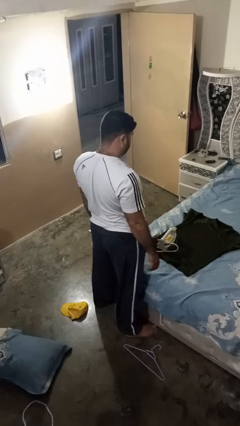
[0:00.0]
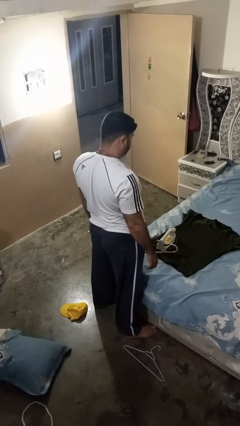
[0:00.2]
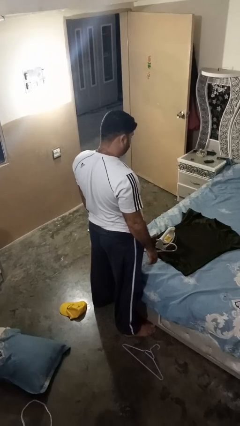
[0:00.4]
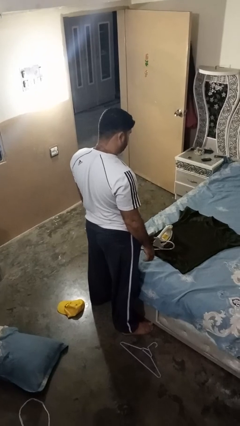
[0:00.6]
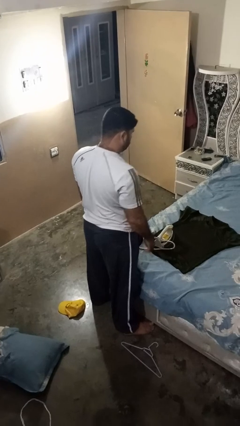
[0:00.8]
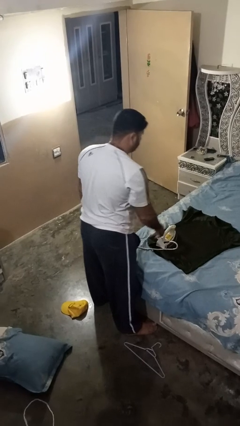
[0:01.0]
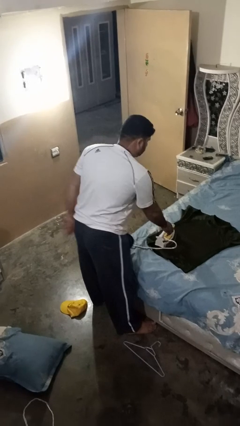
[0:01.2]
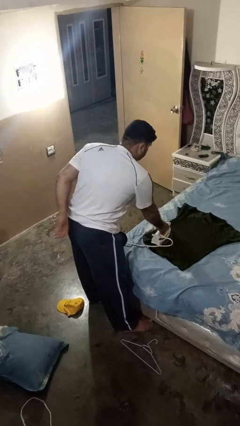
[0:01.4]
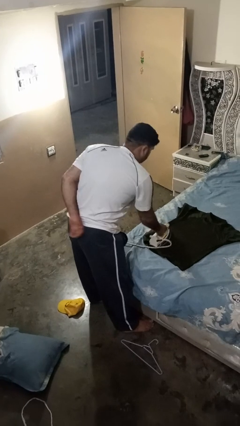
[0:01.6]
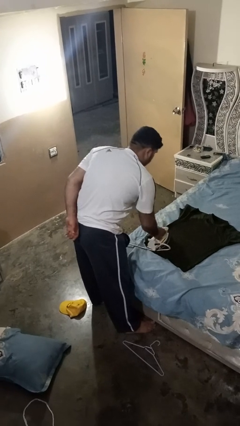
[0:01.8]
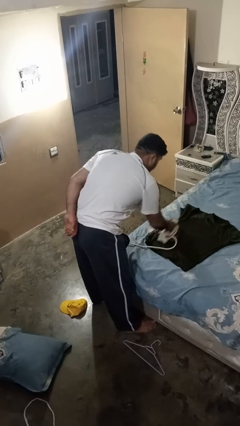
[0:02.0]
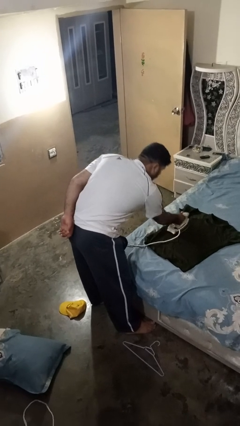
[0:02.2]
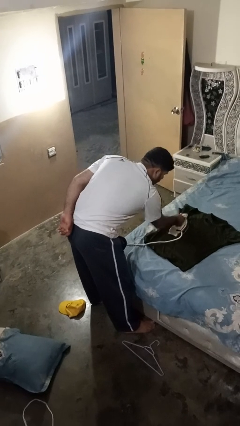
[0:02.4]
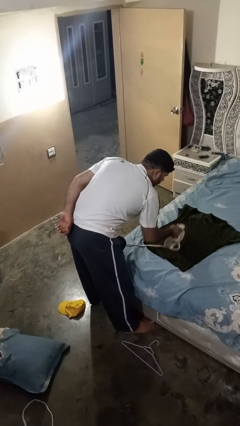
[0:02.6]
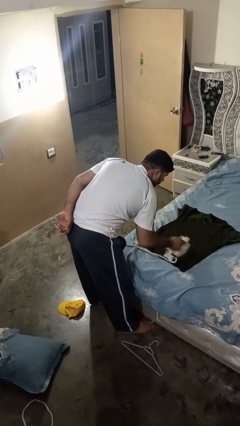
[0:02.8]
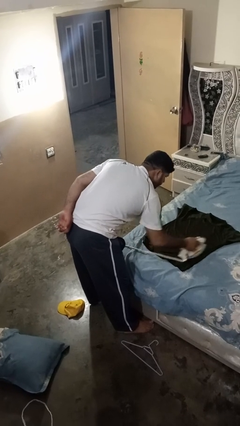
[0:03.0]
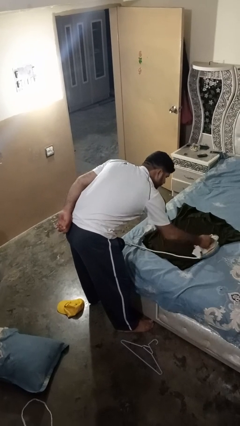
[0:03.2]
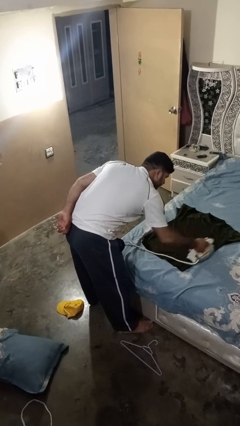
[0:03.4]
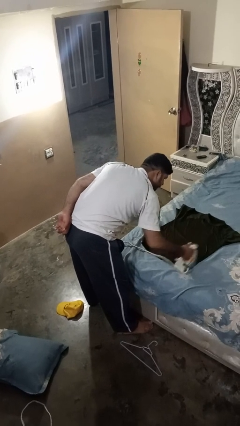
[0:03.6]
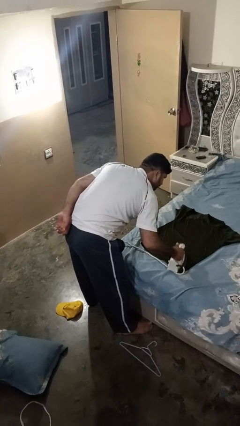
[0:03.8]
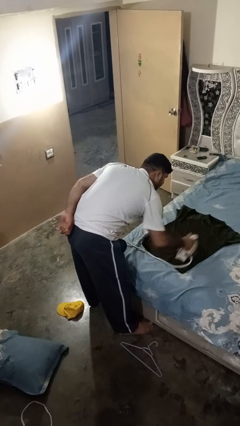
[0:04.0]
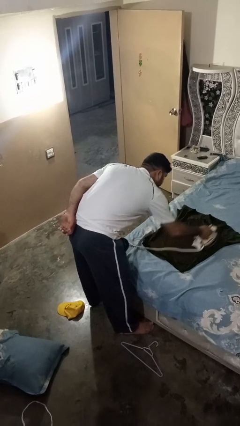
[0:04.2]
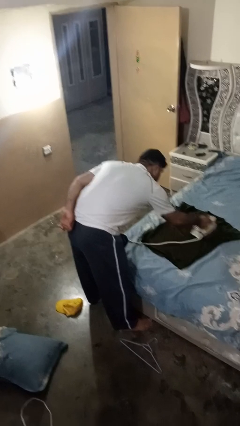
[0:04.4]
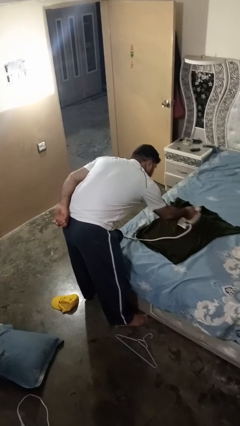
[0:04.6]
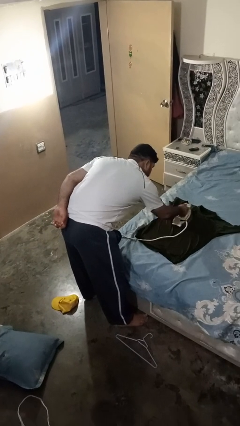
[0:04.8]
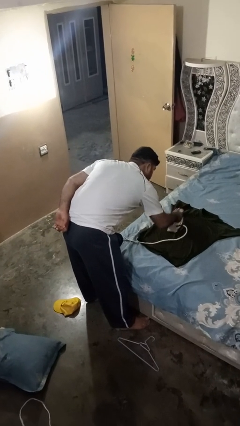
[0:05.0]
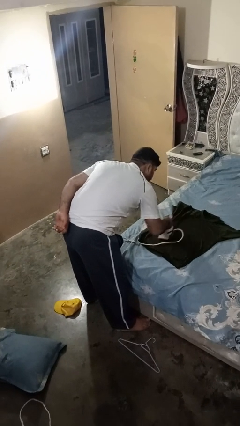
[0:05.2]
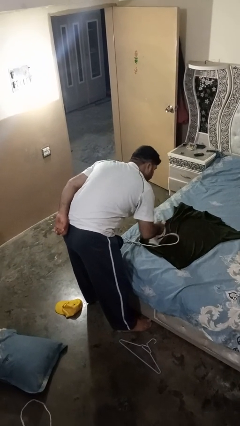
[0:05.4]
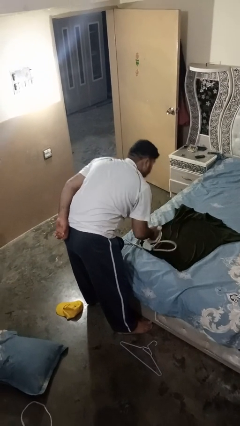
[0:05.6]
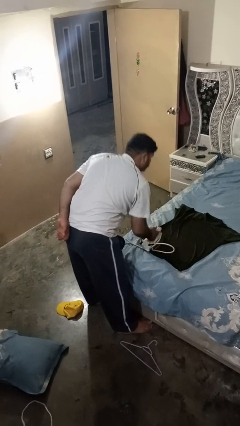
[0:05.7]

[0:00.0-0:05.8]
person irons clothes

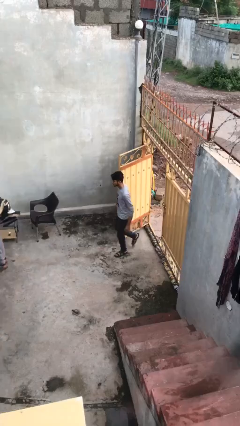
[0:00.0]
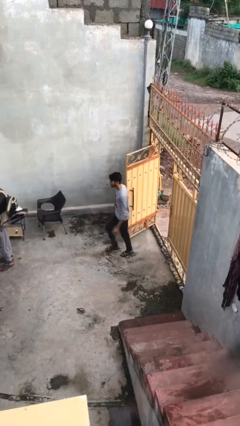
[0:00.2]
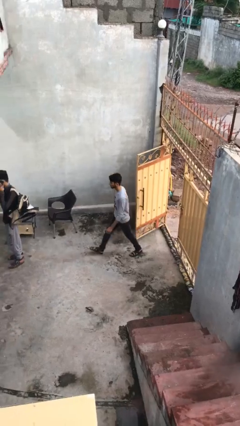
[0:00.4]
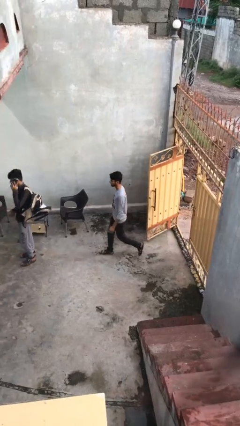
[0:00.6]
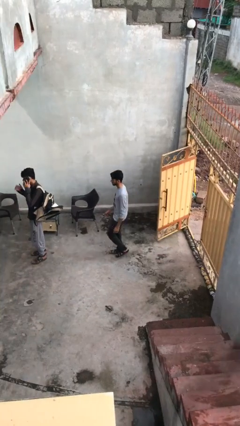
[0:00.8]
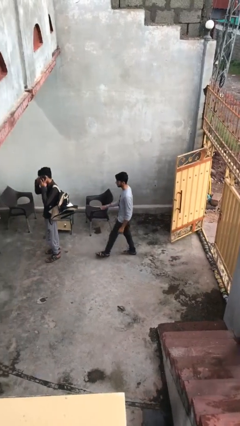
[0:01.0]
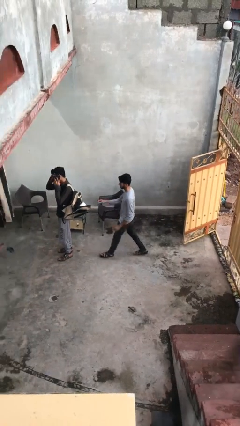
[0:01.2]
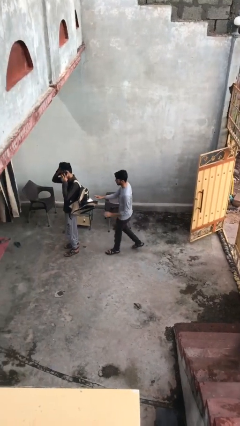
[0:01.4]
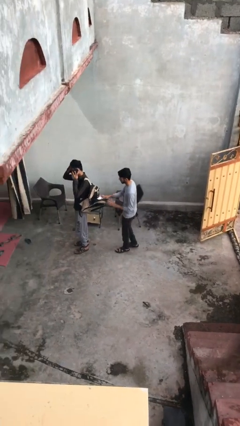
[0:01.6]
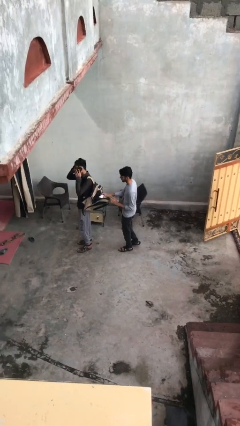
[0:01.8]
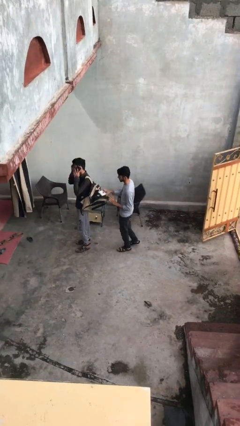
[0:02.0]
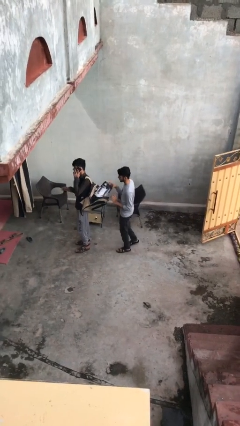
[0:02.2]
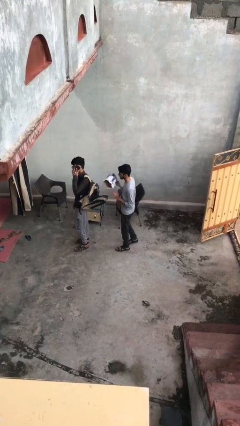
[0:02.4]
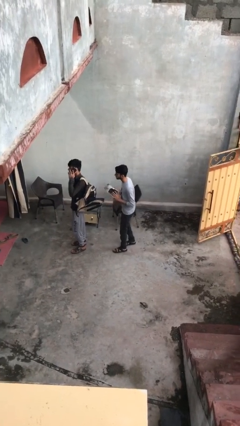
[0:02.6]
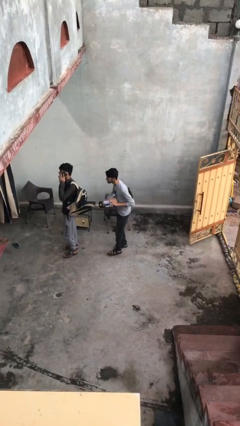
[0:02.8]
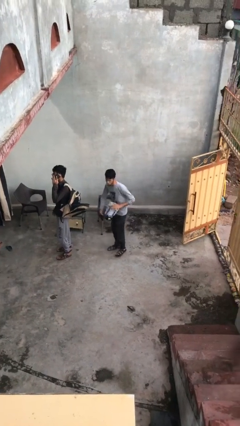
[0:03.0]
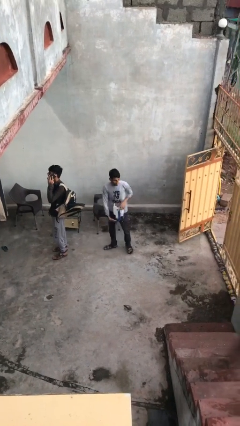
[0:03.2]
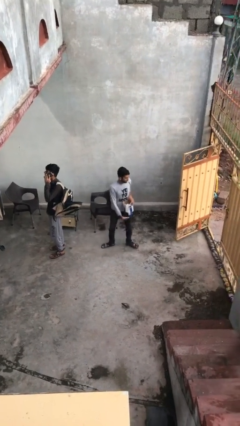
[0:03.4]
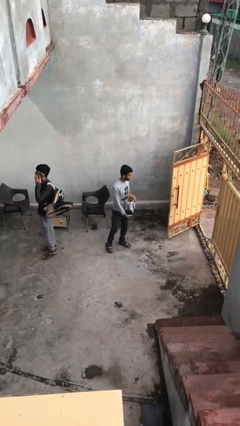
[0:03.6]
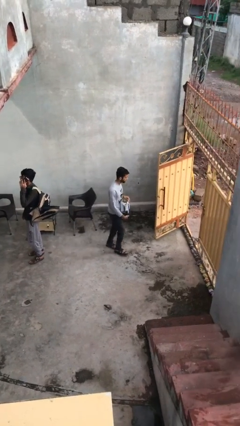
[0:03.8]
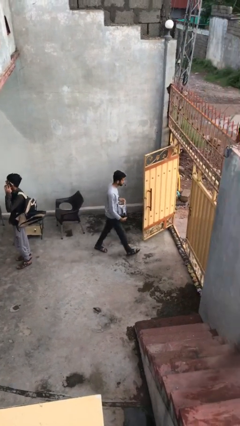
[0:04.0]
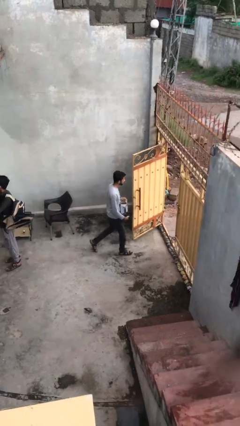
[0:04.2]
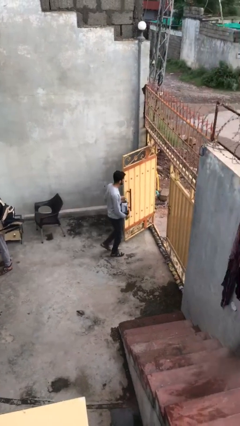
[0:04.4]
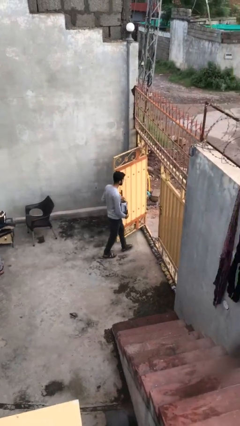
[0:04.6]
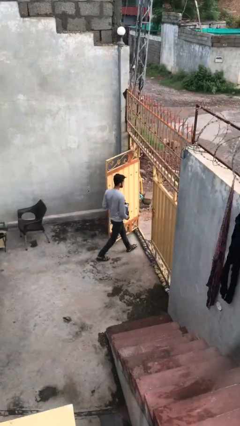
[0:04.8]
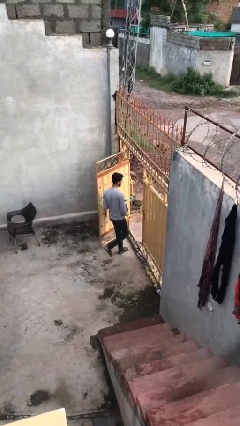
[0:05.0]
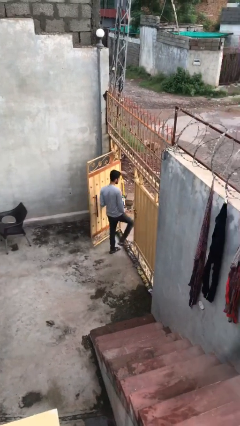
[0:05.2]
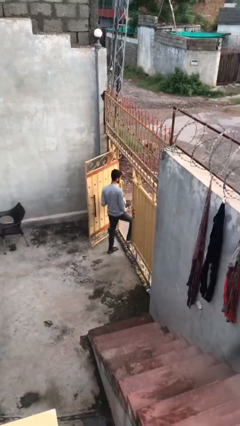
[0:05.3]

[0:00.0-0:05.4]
person steals object from person

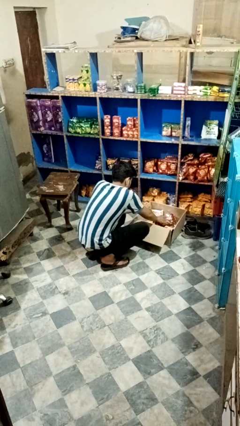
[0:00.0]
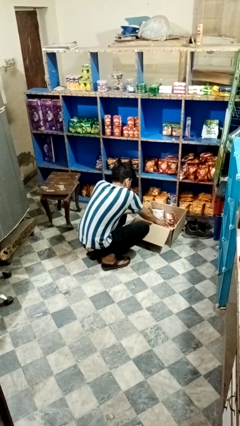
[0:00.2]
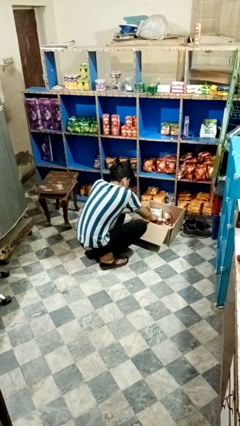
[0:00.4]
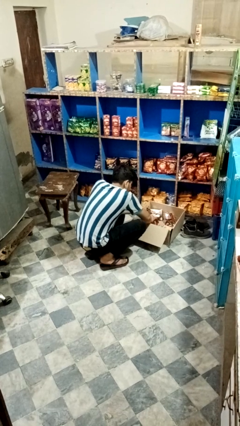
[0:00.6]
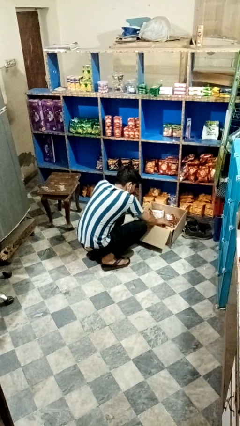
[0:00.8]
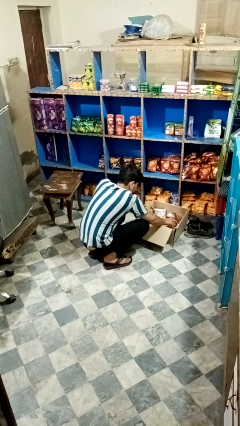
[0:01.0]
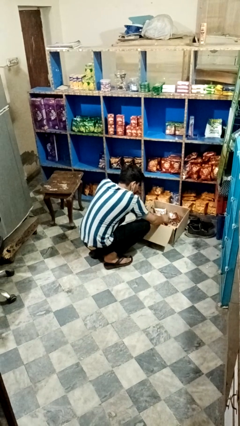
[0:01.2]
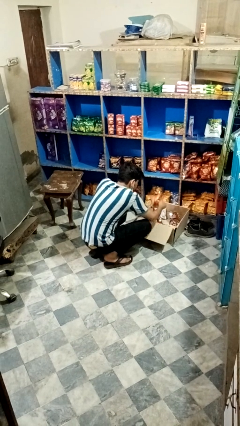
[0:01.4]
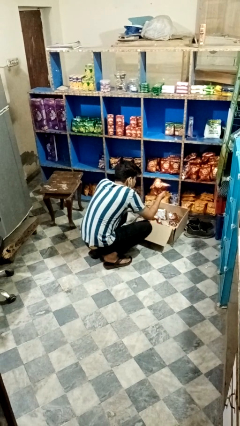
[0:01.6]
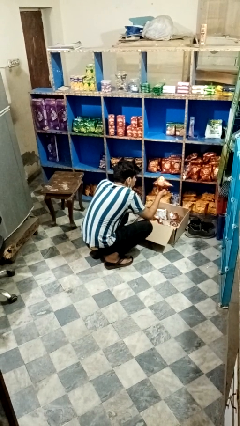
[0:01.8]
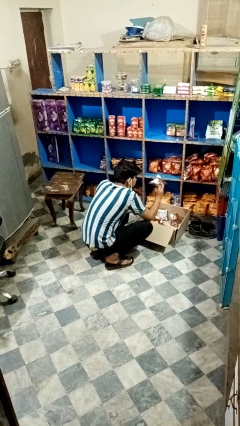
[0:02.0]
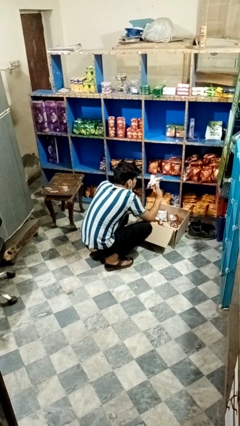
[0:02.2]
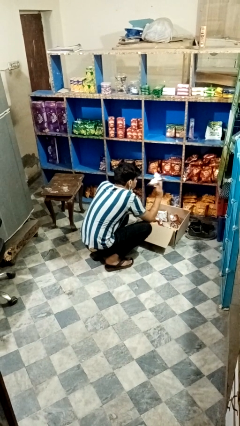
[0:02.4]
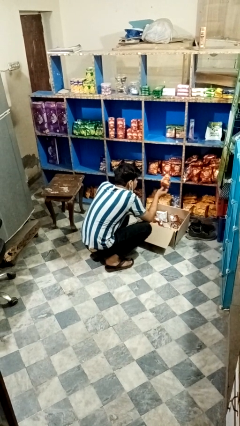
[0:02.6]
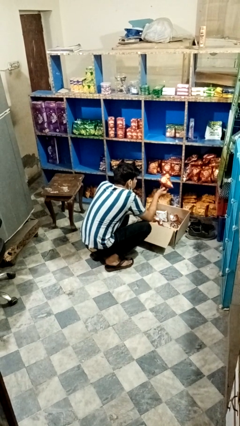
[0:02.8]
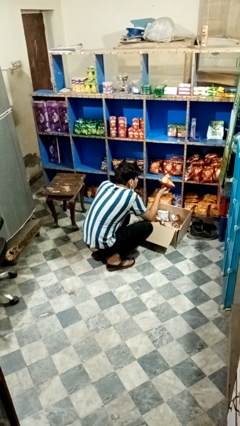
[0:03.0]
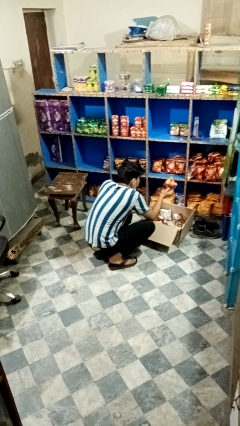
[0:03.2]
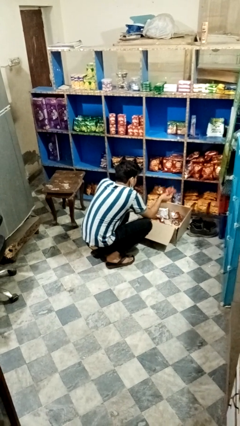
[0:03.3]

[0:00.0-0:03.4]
person searches in box

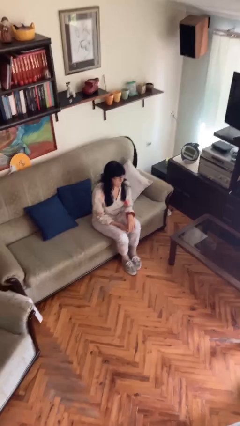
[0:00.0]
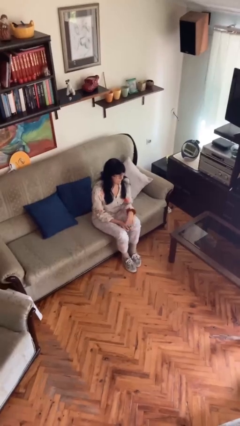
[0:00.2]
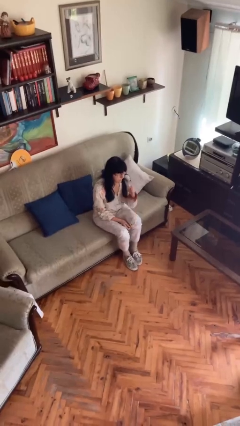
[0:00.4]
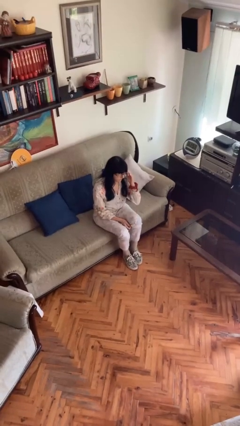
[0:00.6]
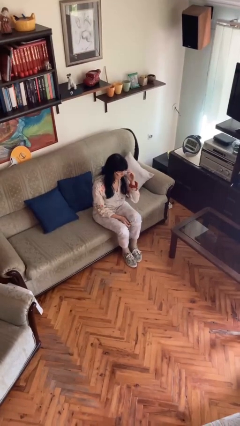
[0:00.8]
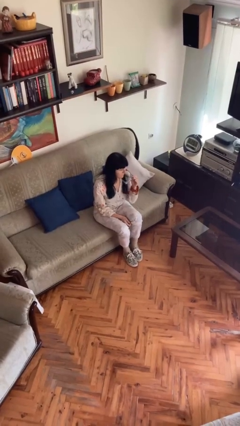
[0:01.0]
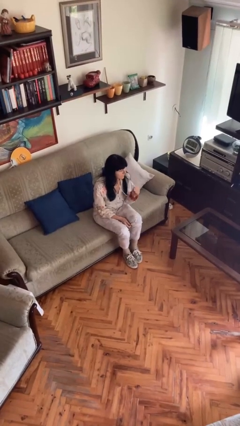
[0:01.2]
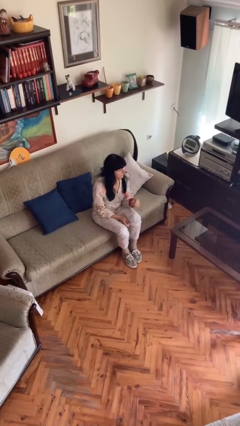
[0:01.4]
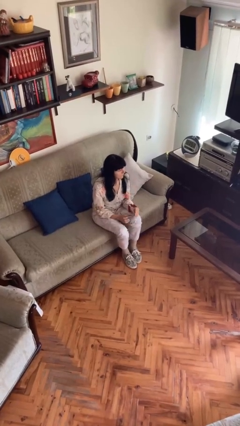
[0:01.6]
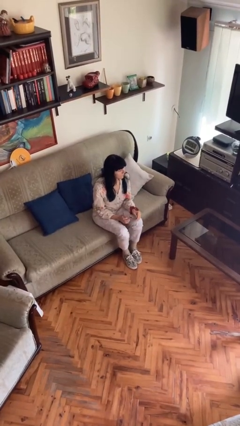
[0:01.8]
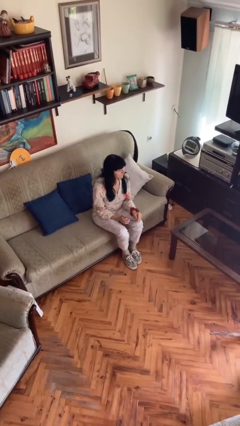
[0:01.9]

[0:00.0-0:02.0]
person takes off glasses

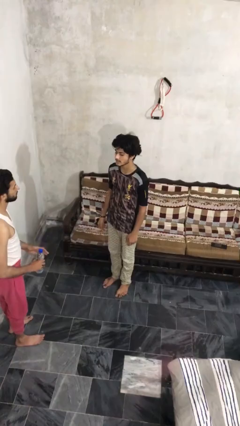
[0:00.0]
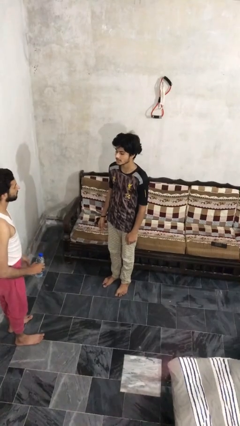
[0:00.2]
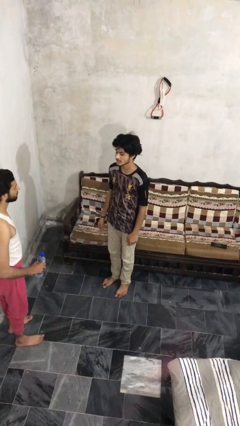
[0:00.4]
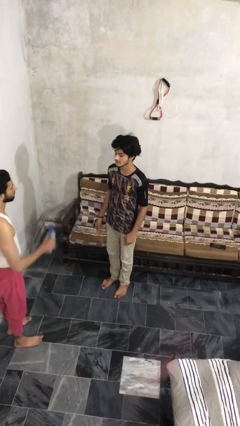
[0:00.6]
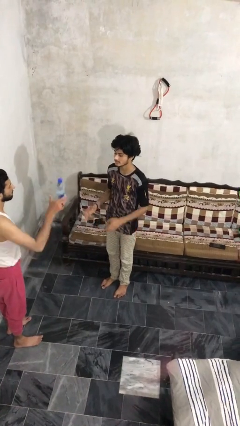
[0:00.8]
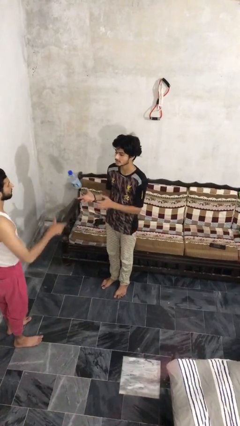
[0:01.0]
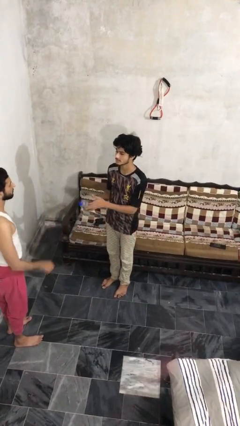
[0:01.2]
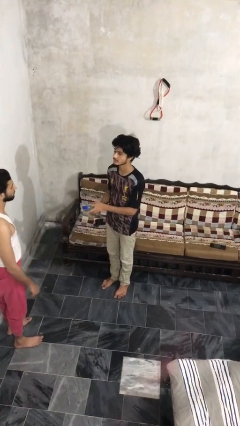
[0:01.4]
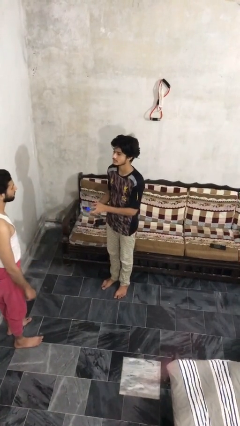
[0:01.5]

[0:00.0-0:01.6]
person catches object from person
